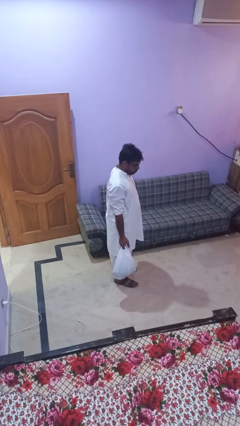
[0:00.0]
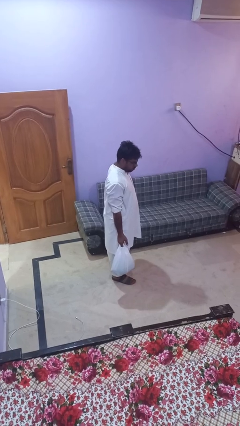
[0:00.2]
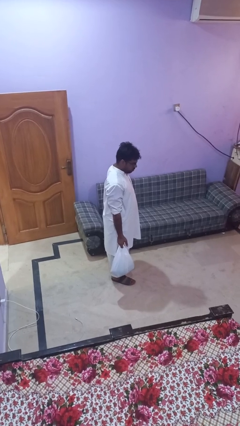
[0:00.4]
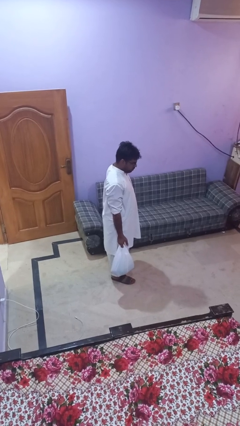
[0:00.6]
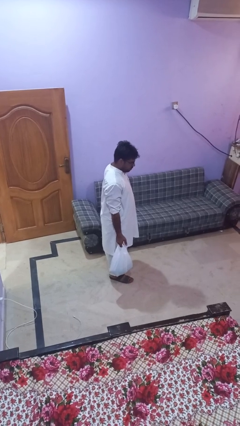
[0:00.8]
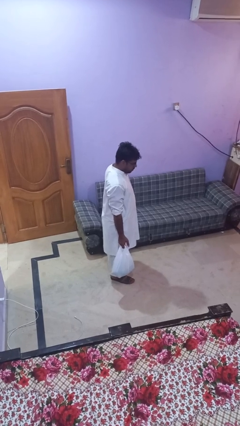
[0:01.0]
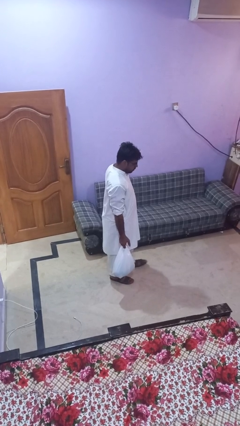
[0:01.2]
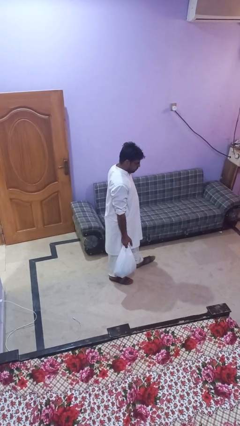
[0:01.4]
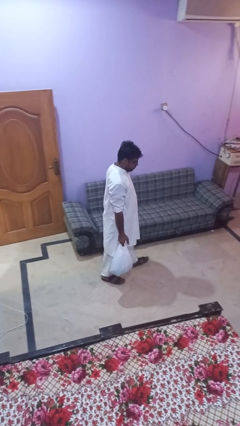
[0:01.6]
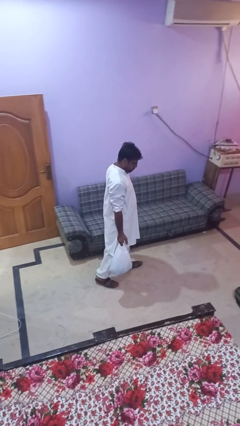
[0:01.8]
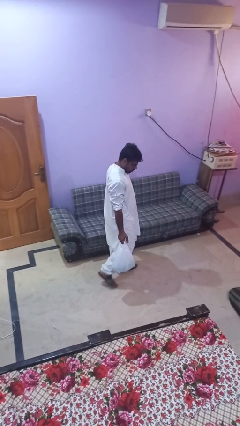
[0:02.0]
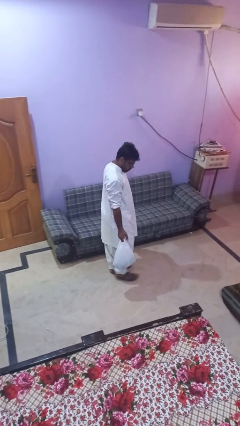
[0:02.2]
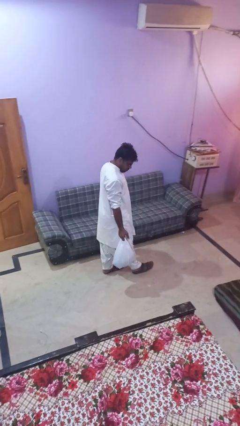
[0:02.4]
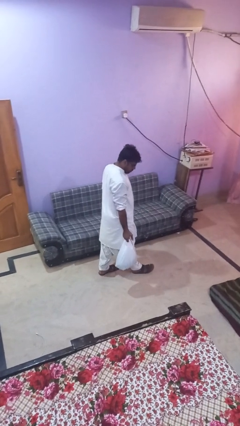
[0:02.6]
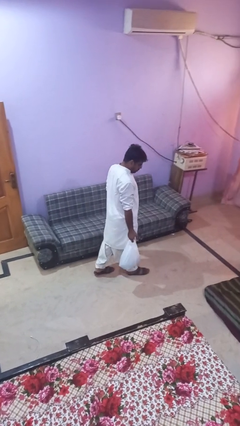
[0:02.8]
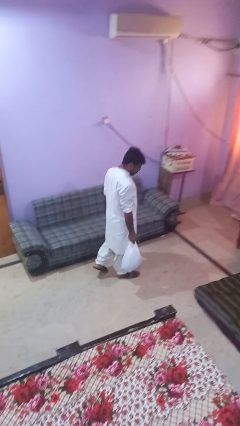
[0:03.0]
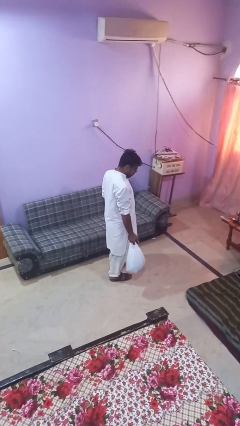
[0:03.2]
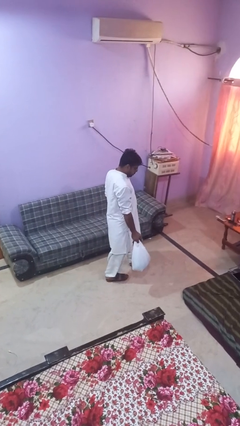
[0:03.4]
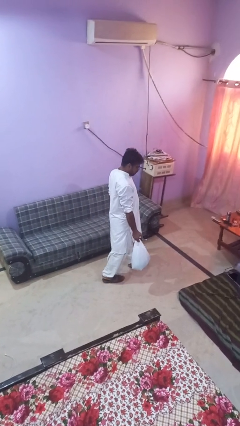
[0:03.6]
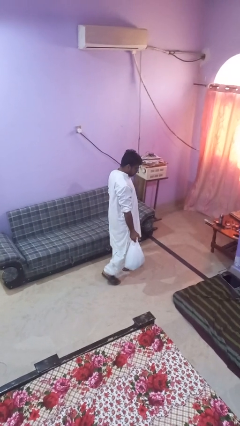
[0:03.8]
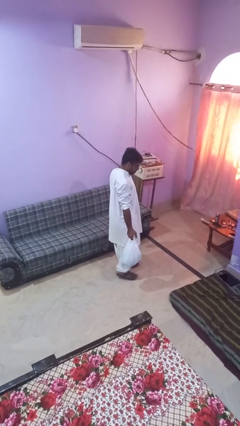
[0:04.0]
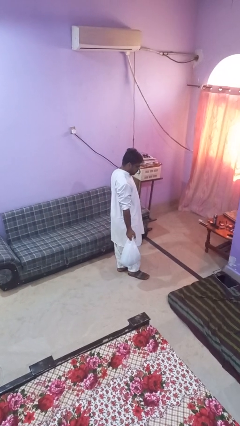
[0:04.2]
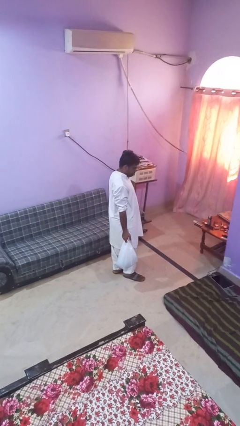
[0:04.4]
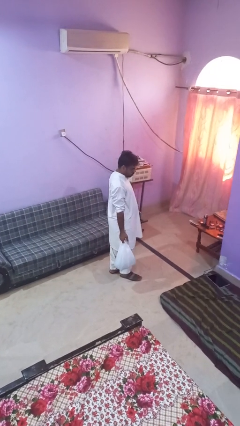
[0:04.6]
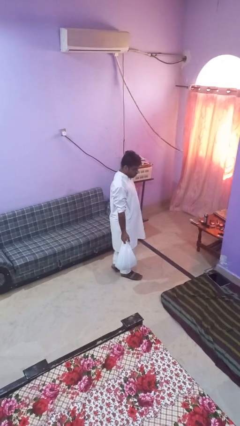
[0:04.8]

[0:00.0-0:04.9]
person carries groceries

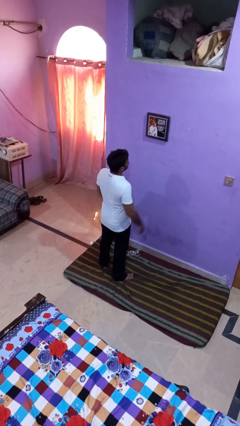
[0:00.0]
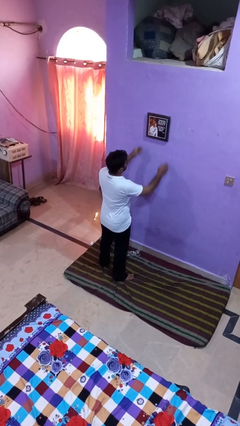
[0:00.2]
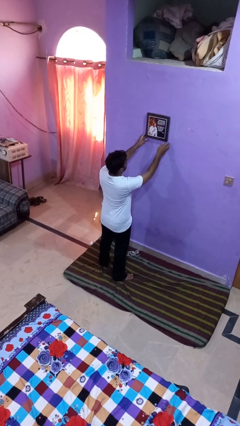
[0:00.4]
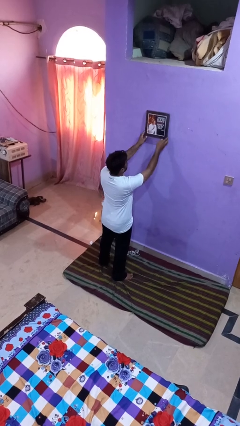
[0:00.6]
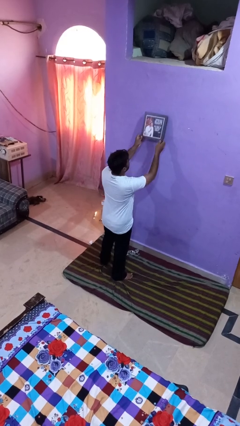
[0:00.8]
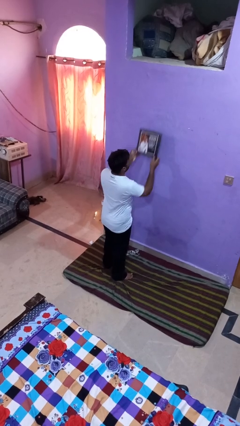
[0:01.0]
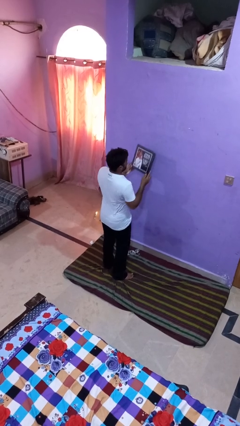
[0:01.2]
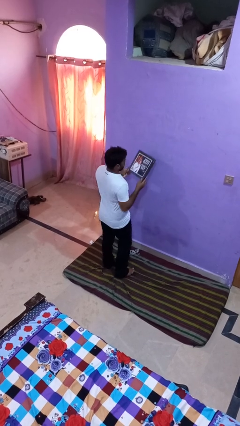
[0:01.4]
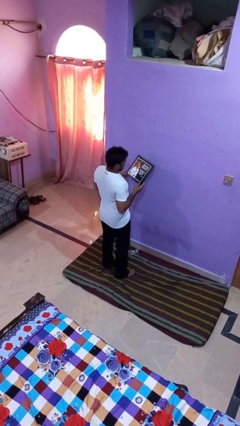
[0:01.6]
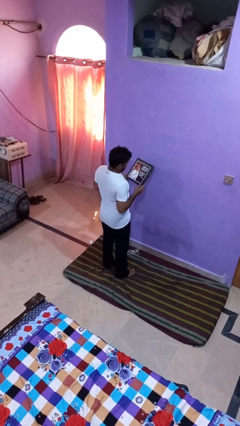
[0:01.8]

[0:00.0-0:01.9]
person puts up picture frame

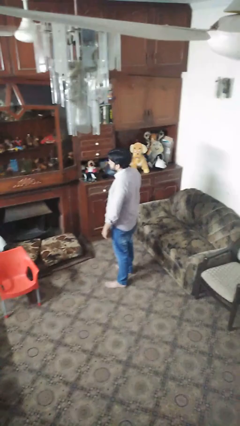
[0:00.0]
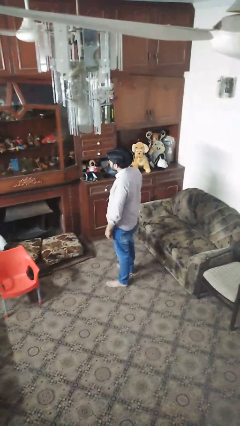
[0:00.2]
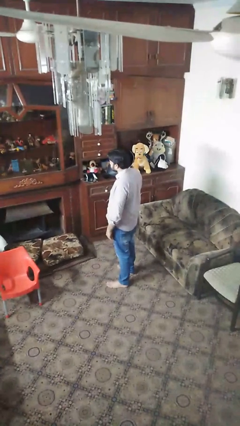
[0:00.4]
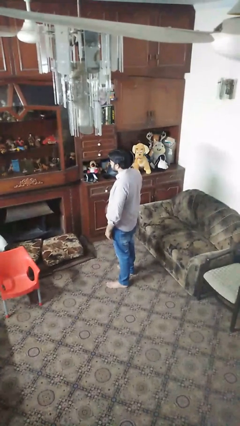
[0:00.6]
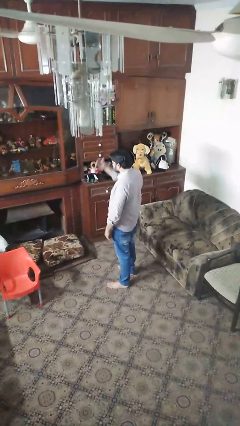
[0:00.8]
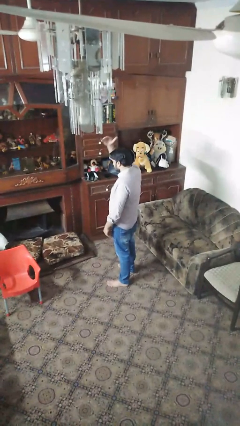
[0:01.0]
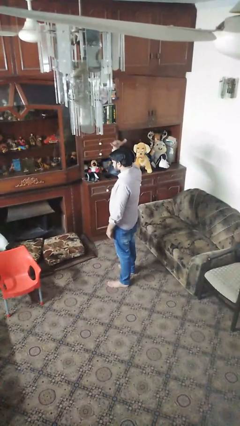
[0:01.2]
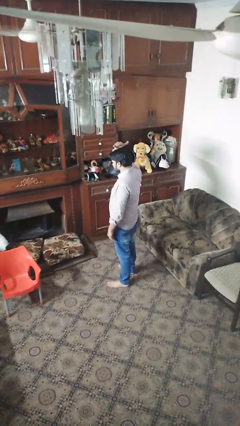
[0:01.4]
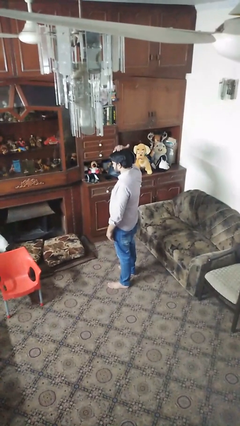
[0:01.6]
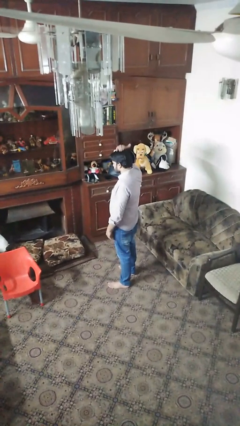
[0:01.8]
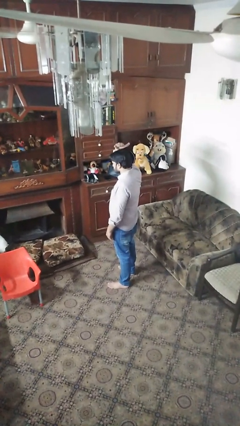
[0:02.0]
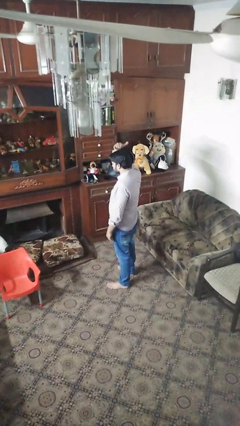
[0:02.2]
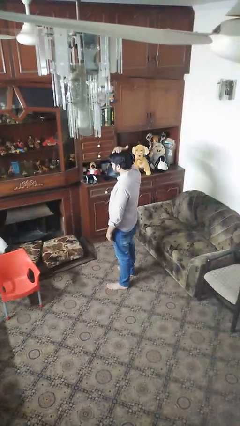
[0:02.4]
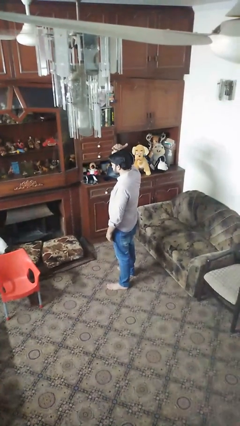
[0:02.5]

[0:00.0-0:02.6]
person pats head

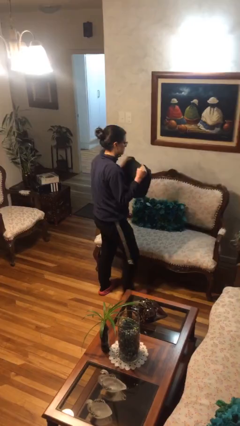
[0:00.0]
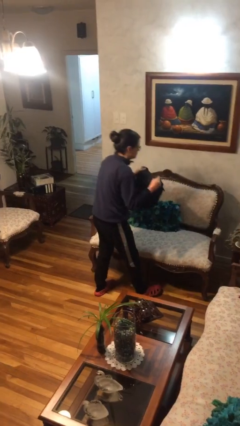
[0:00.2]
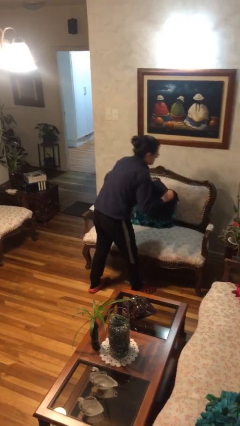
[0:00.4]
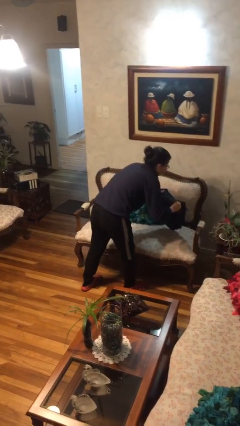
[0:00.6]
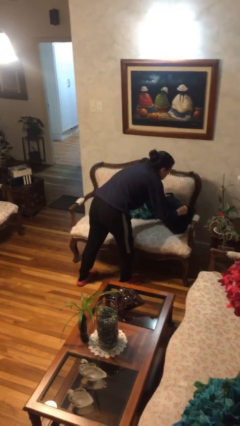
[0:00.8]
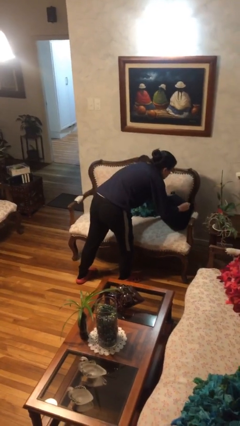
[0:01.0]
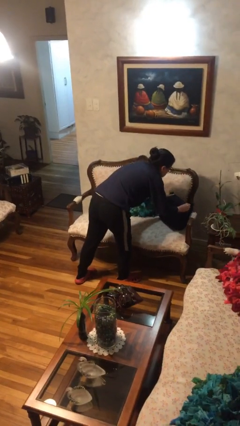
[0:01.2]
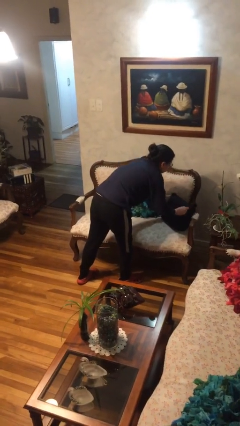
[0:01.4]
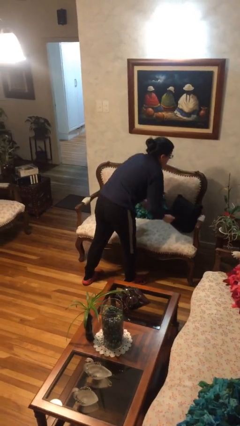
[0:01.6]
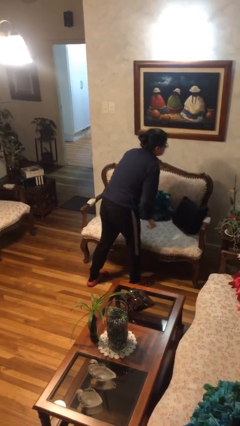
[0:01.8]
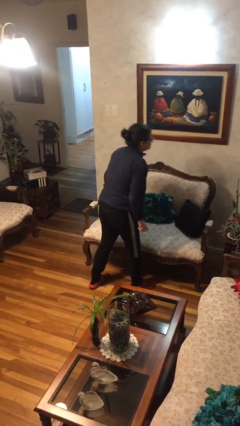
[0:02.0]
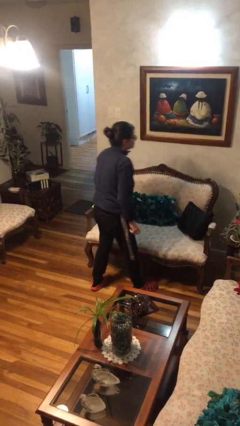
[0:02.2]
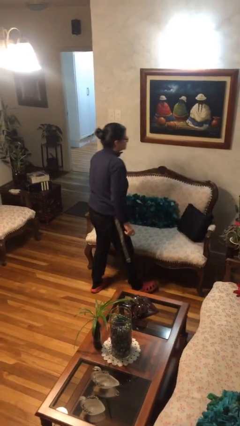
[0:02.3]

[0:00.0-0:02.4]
person puts down object on couch

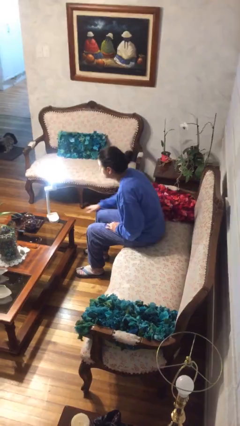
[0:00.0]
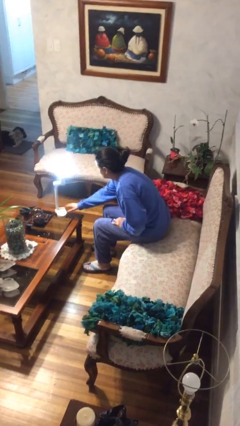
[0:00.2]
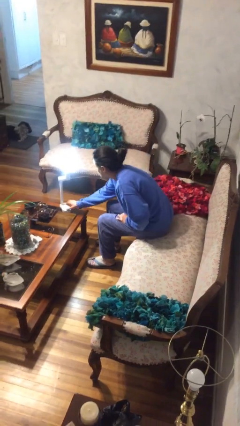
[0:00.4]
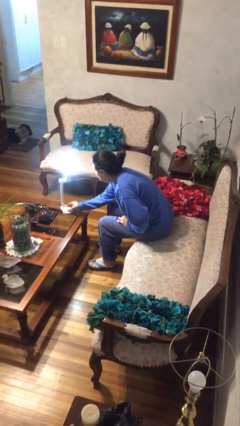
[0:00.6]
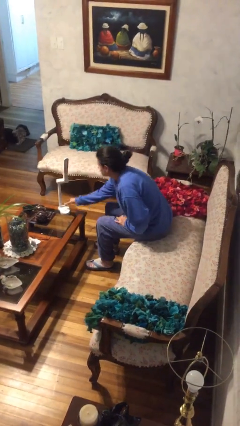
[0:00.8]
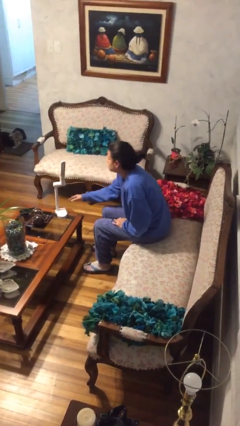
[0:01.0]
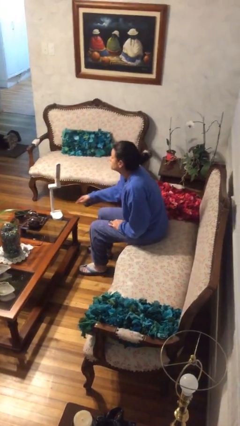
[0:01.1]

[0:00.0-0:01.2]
person turns off lamp

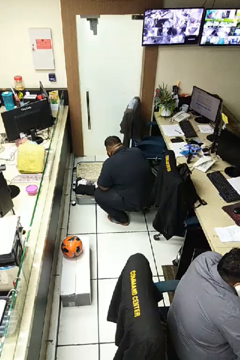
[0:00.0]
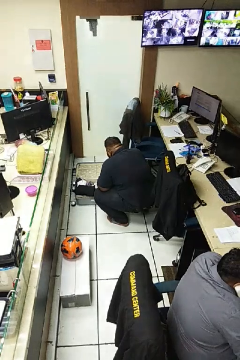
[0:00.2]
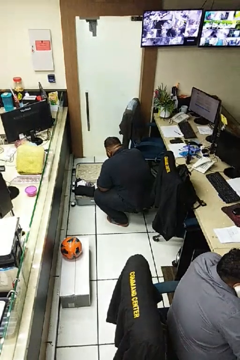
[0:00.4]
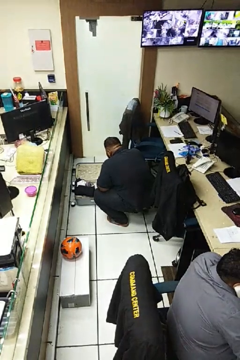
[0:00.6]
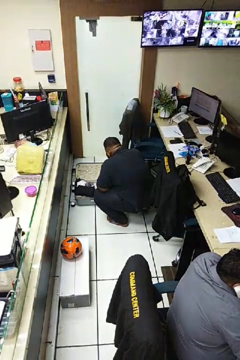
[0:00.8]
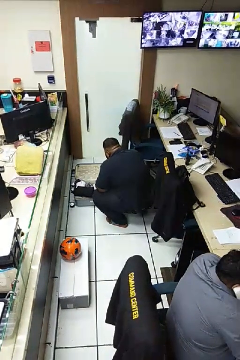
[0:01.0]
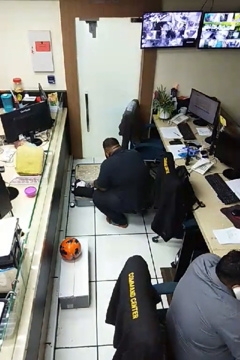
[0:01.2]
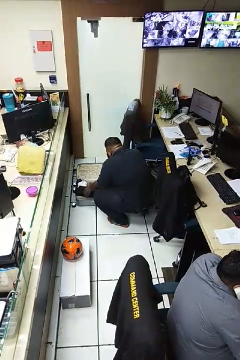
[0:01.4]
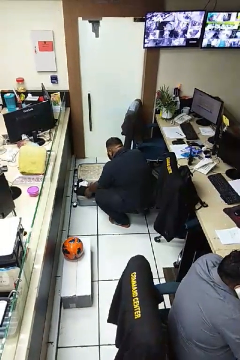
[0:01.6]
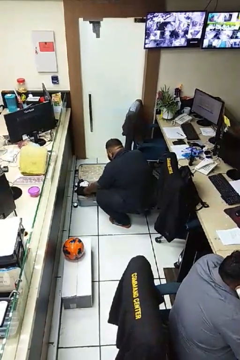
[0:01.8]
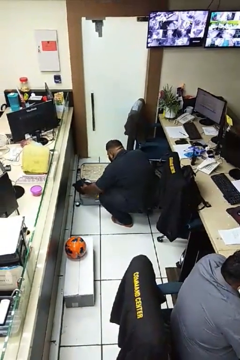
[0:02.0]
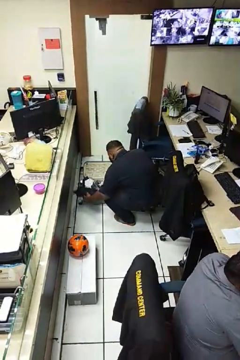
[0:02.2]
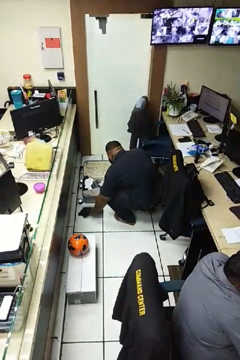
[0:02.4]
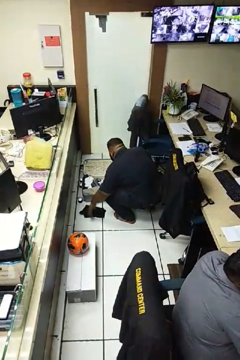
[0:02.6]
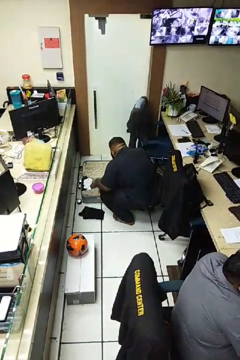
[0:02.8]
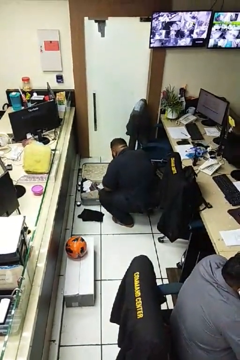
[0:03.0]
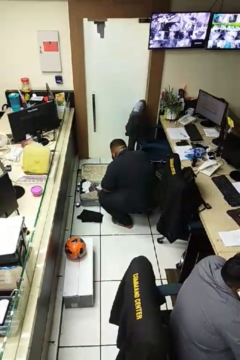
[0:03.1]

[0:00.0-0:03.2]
person unloads clothes from suitcase

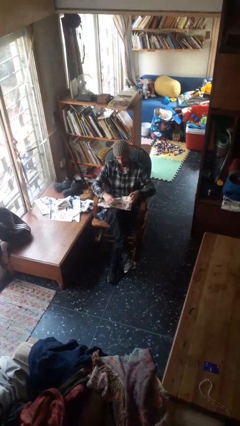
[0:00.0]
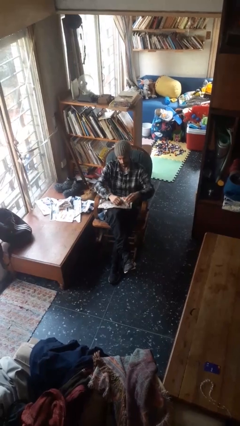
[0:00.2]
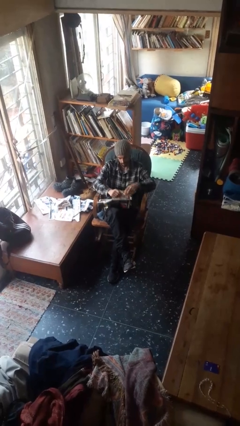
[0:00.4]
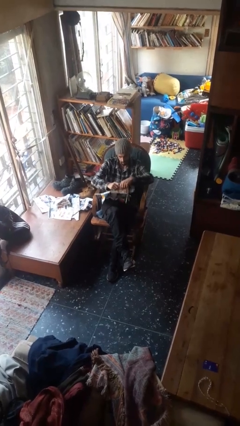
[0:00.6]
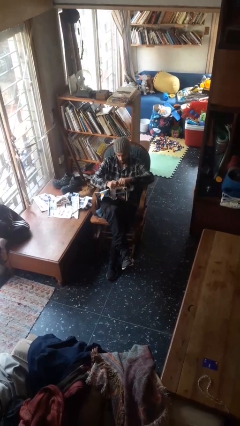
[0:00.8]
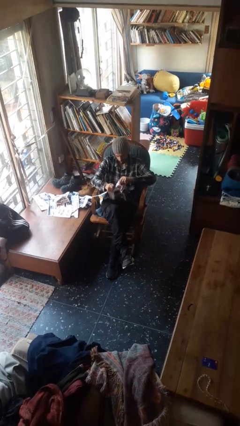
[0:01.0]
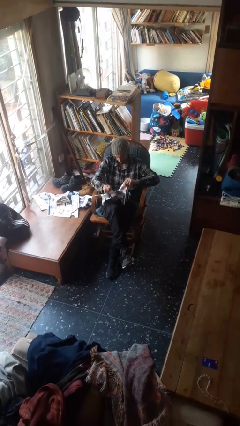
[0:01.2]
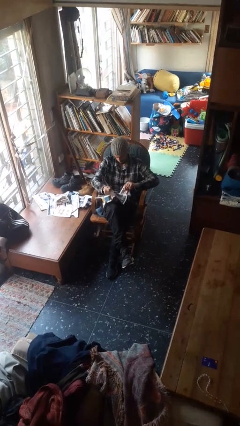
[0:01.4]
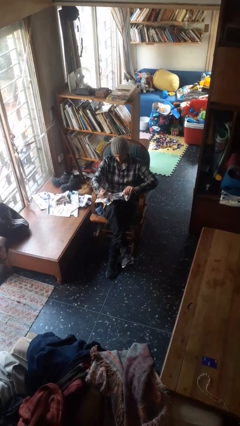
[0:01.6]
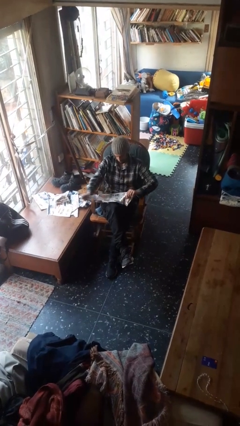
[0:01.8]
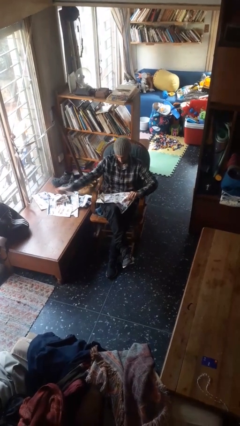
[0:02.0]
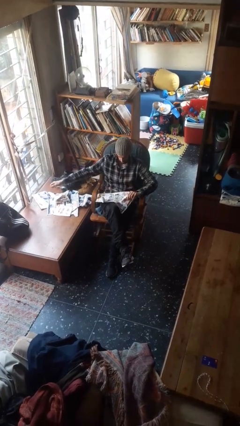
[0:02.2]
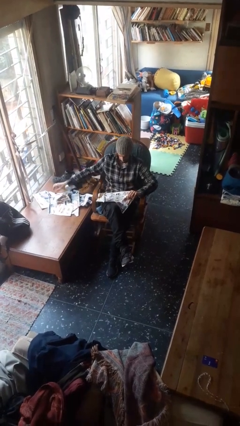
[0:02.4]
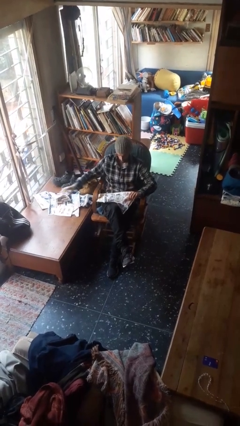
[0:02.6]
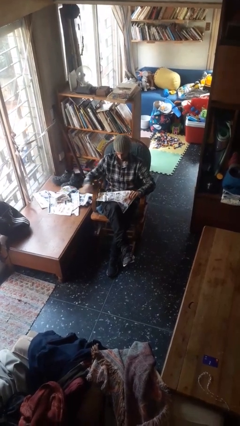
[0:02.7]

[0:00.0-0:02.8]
person tears paper
